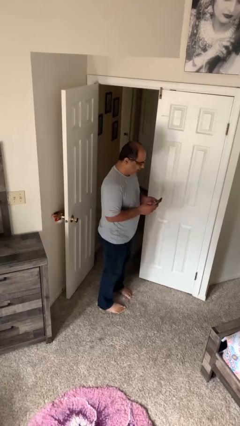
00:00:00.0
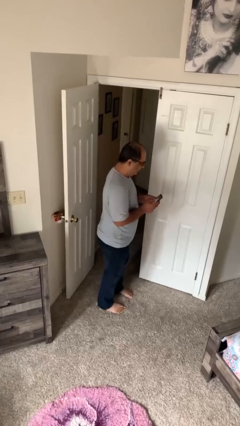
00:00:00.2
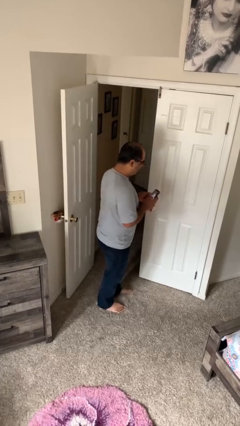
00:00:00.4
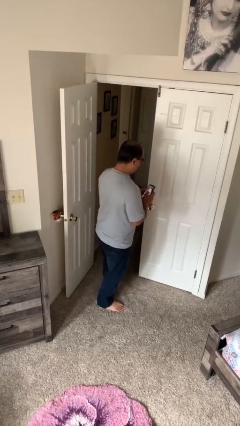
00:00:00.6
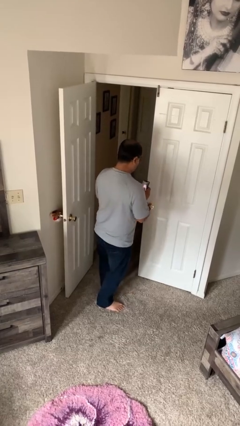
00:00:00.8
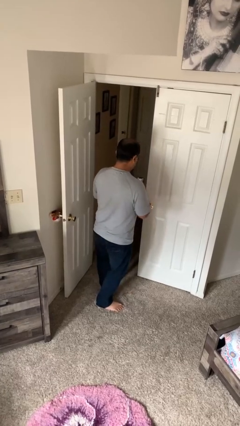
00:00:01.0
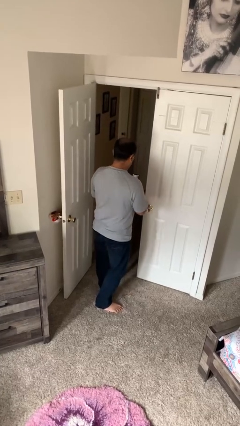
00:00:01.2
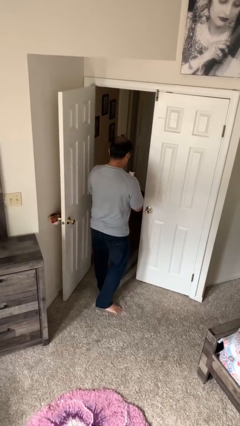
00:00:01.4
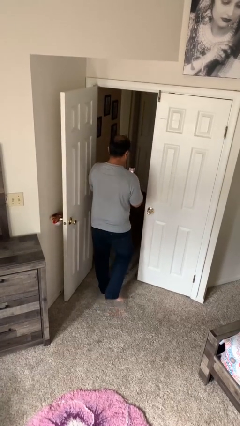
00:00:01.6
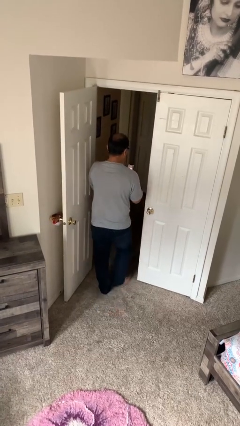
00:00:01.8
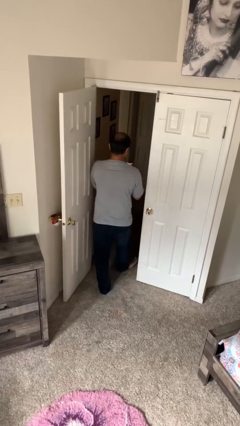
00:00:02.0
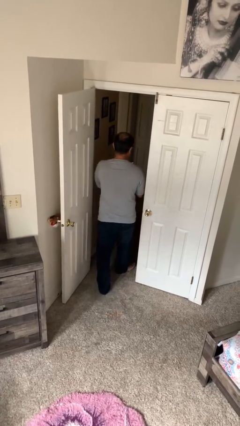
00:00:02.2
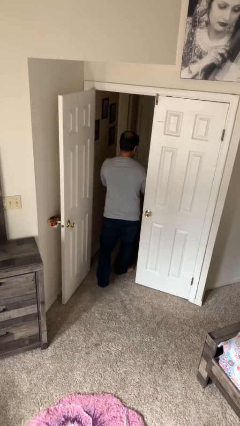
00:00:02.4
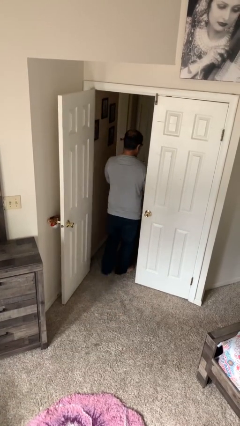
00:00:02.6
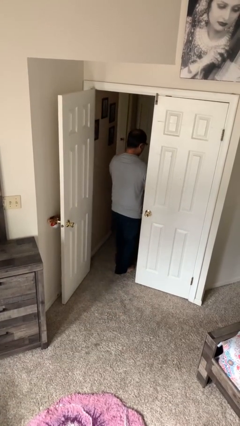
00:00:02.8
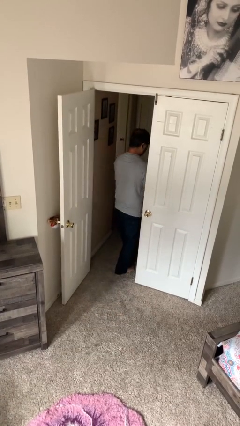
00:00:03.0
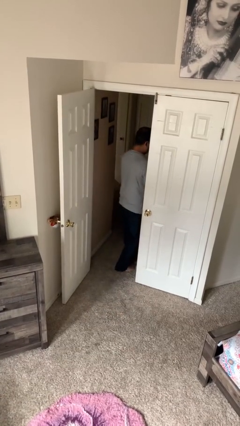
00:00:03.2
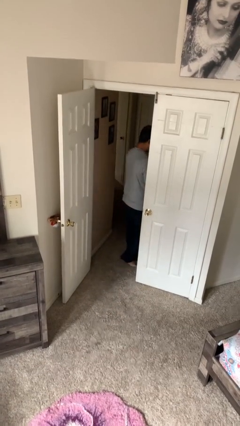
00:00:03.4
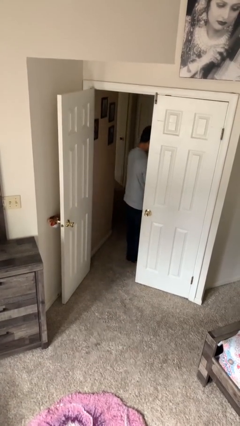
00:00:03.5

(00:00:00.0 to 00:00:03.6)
person exits scene through structure

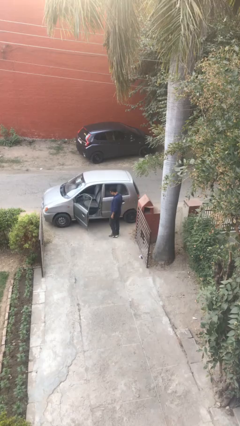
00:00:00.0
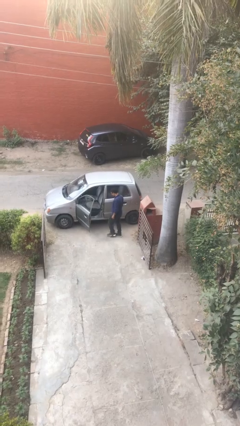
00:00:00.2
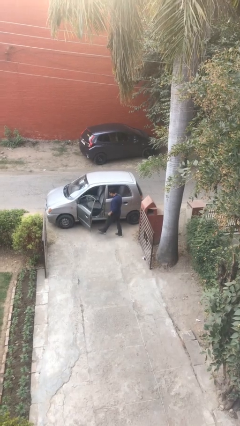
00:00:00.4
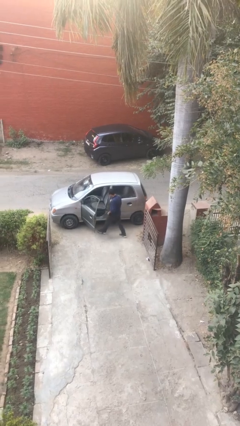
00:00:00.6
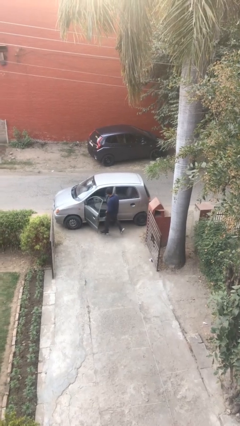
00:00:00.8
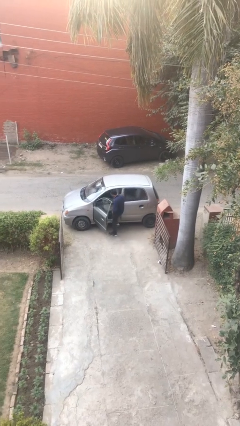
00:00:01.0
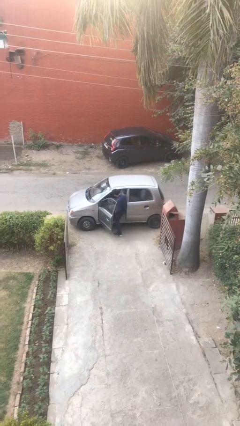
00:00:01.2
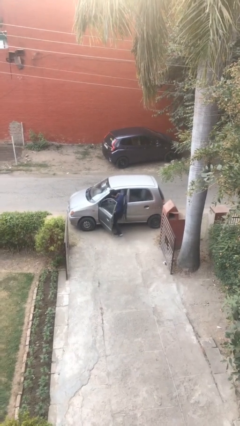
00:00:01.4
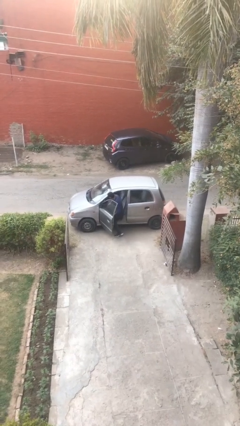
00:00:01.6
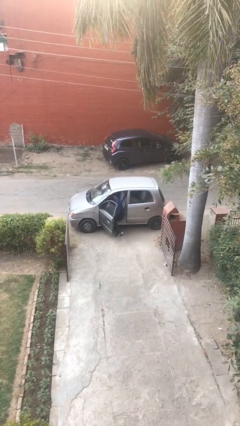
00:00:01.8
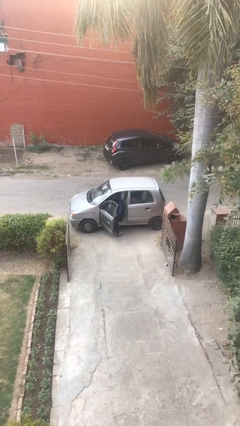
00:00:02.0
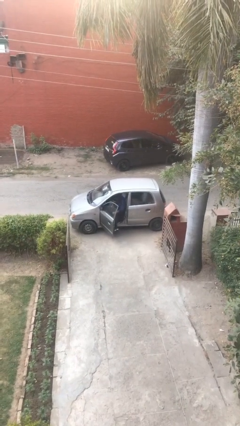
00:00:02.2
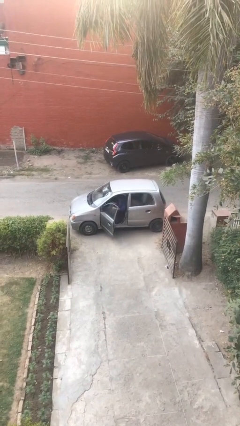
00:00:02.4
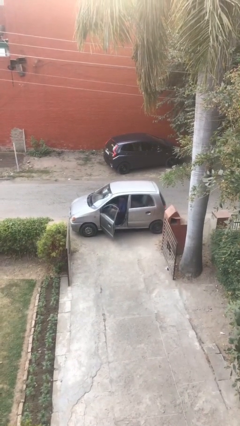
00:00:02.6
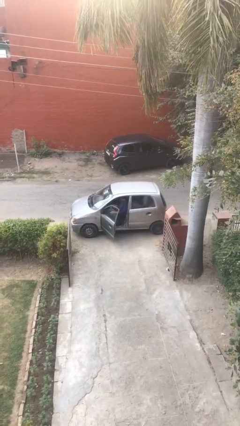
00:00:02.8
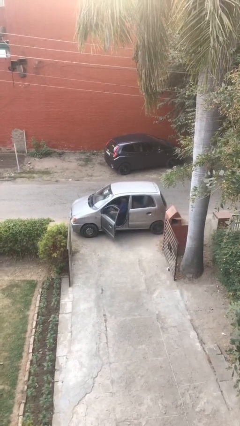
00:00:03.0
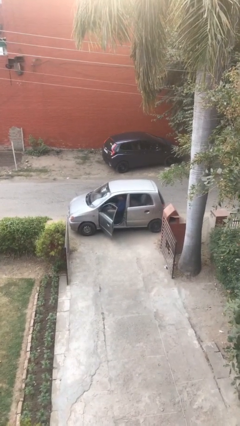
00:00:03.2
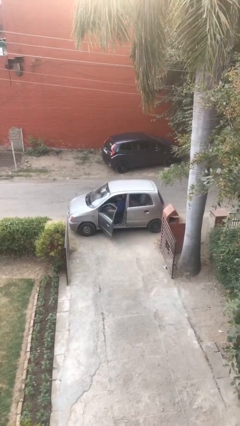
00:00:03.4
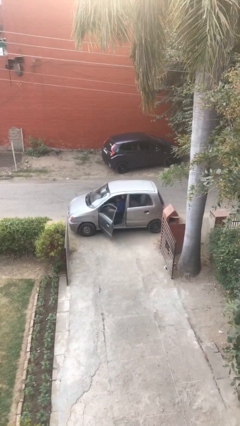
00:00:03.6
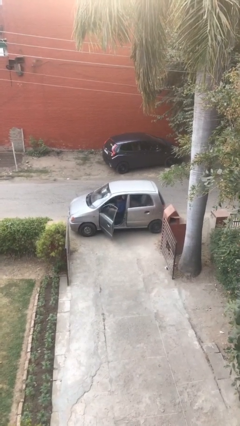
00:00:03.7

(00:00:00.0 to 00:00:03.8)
person enters car

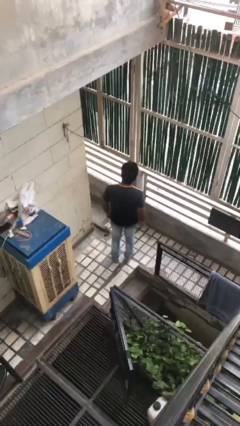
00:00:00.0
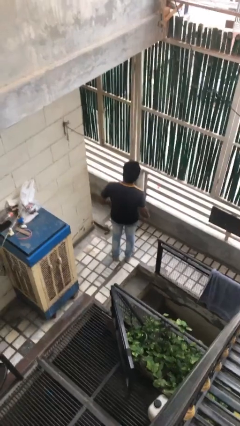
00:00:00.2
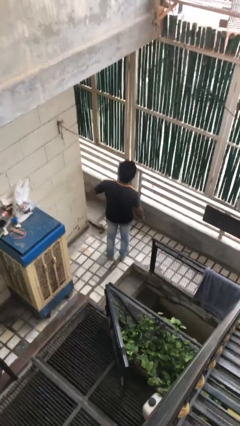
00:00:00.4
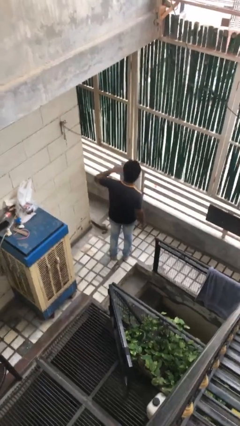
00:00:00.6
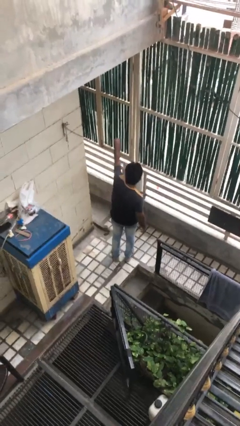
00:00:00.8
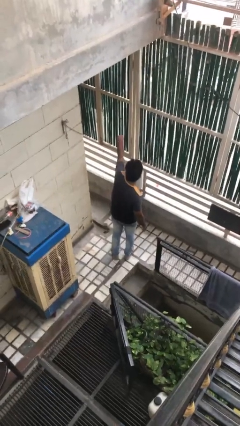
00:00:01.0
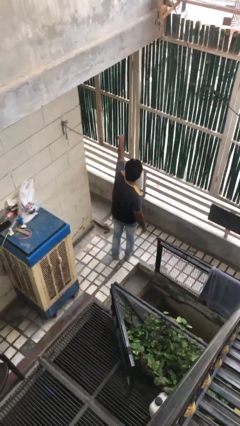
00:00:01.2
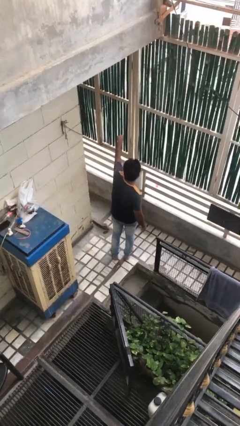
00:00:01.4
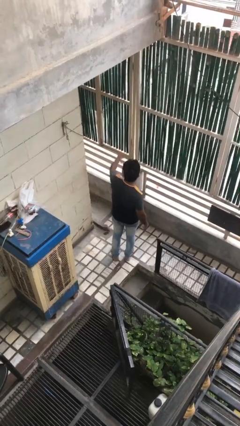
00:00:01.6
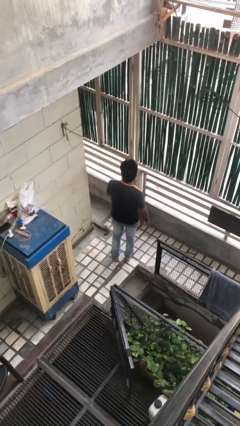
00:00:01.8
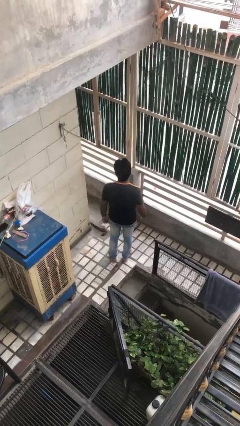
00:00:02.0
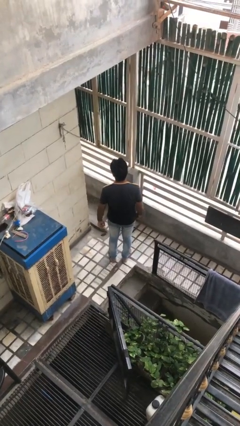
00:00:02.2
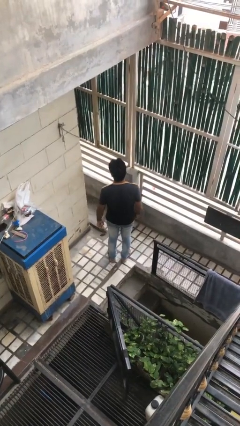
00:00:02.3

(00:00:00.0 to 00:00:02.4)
person punches

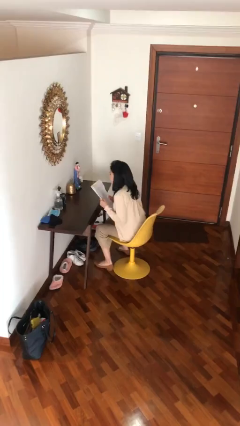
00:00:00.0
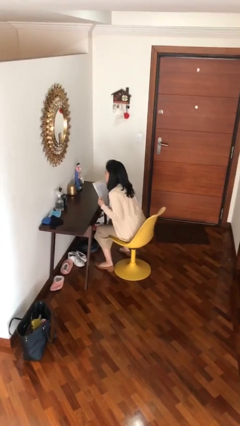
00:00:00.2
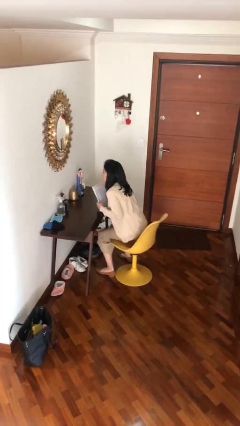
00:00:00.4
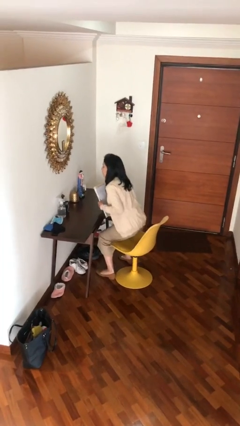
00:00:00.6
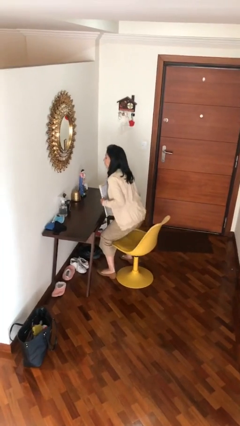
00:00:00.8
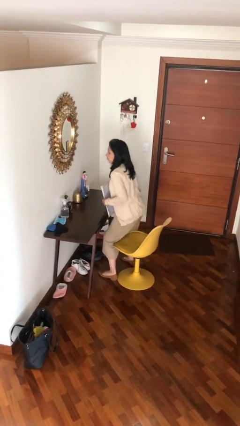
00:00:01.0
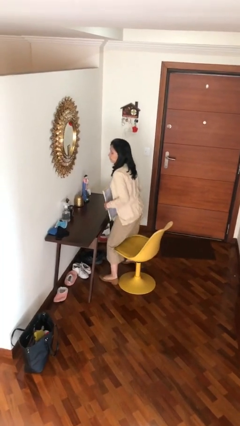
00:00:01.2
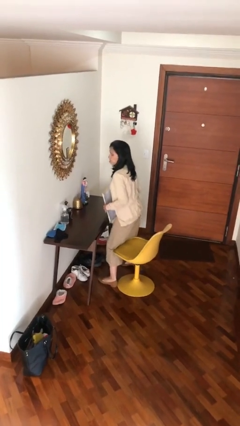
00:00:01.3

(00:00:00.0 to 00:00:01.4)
person stands up

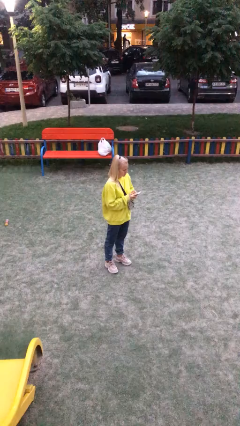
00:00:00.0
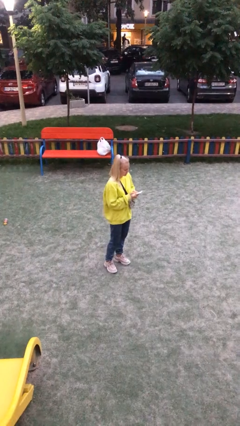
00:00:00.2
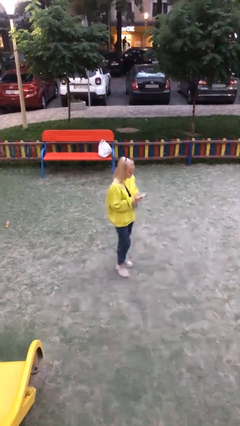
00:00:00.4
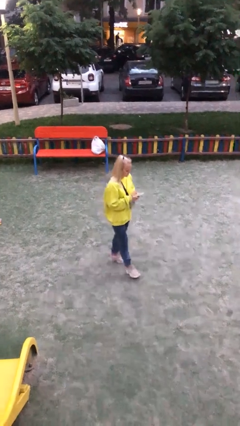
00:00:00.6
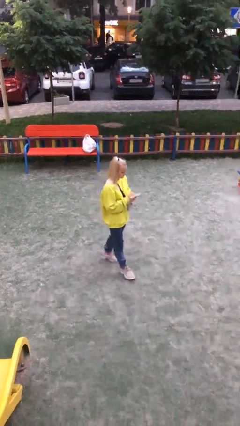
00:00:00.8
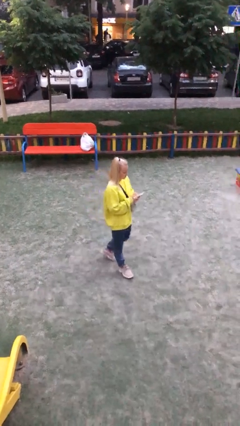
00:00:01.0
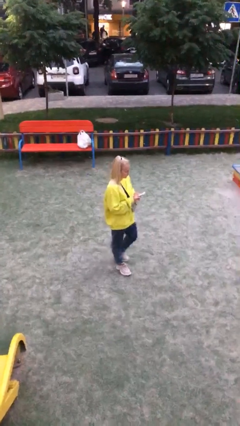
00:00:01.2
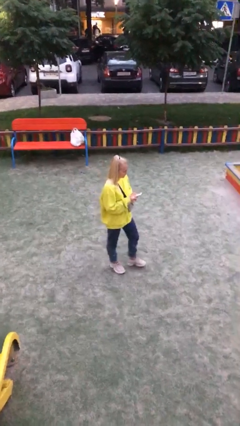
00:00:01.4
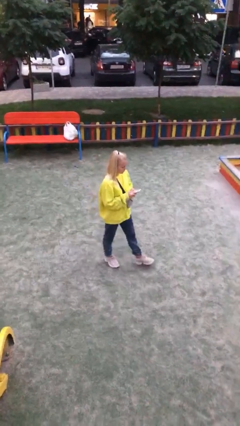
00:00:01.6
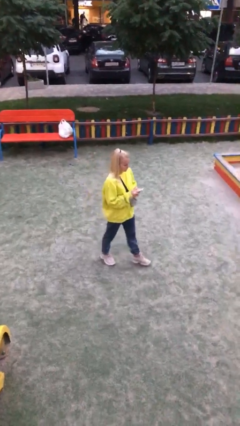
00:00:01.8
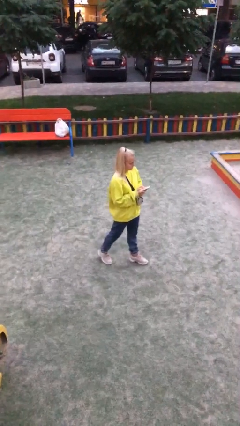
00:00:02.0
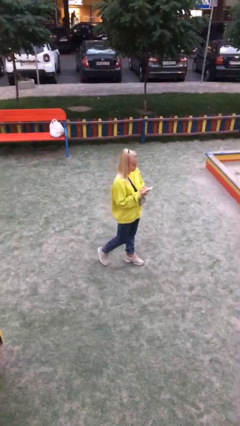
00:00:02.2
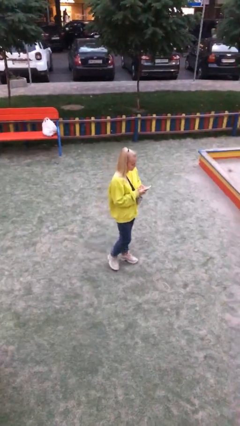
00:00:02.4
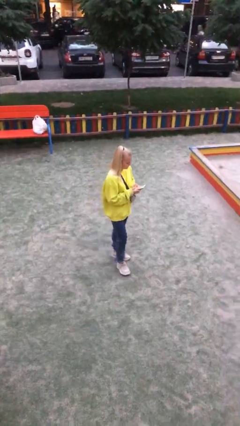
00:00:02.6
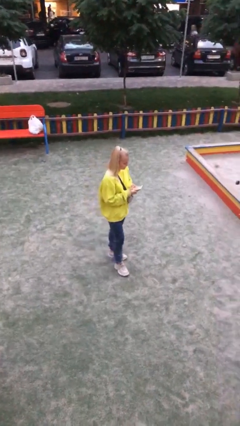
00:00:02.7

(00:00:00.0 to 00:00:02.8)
person texts on phone

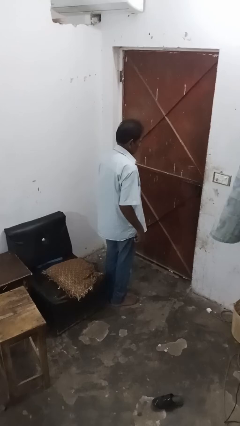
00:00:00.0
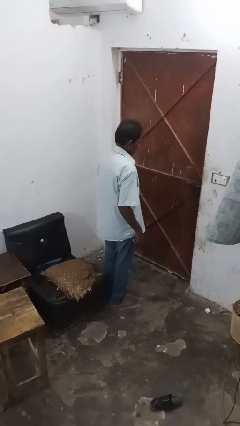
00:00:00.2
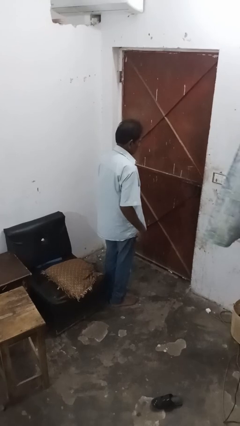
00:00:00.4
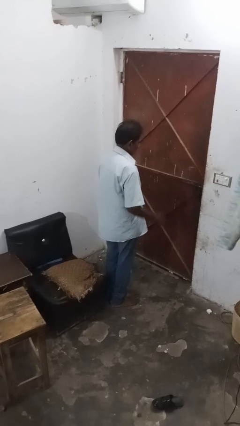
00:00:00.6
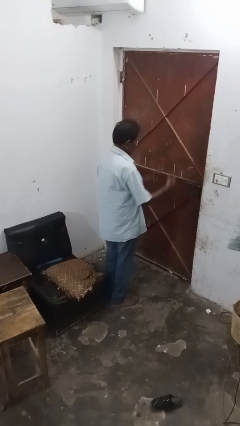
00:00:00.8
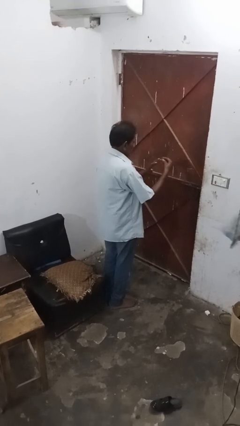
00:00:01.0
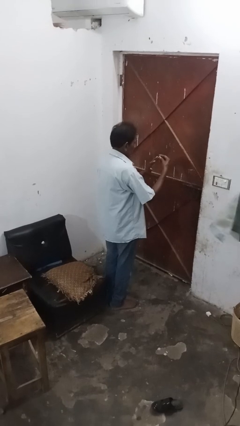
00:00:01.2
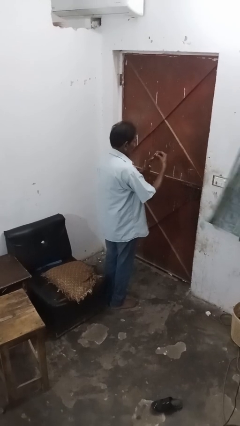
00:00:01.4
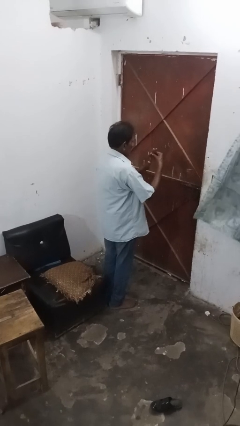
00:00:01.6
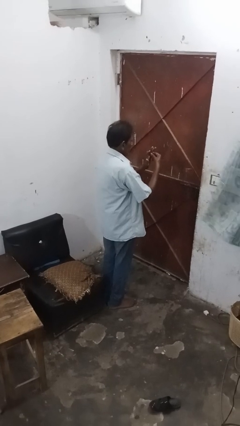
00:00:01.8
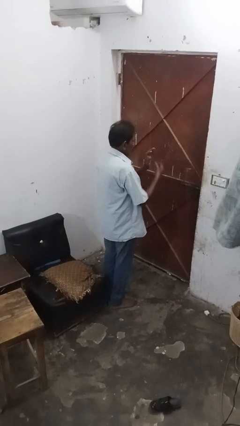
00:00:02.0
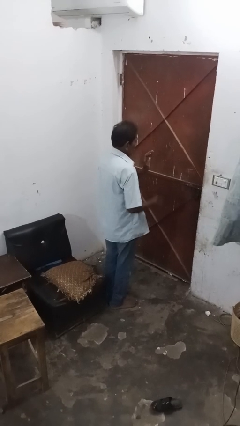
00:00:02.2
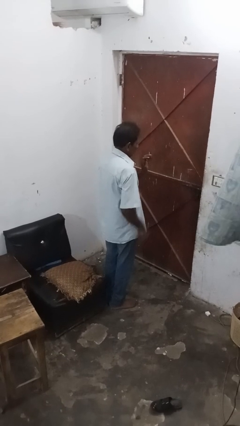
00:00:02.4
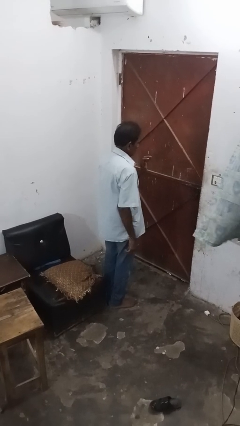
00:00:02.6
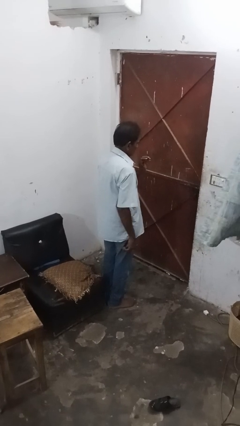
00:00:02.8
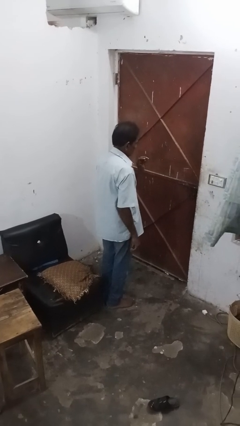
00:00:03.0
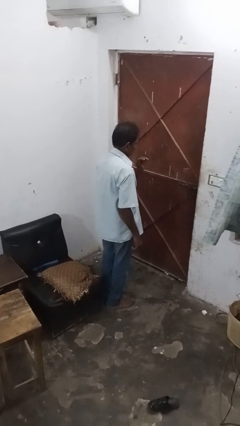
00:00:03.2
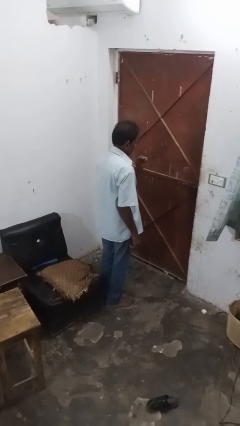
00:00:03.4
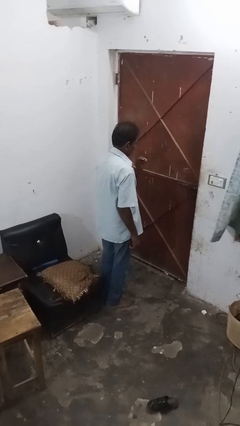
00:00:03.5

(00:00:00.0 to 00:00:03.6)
person puts on ring
